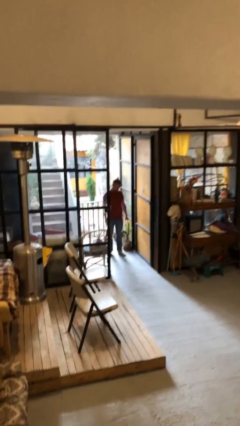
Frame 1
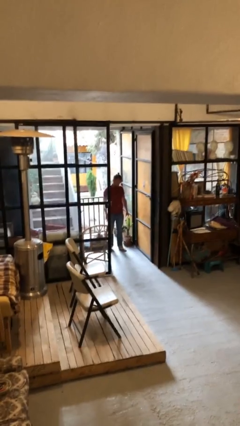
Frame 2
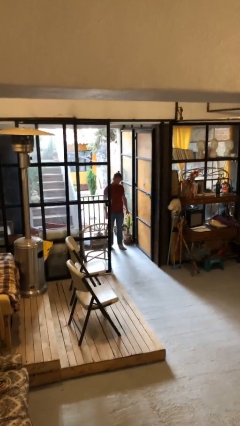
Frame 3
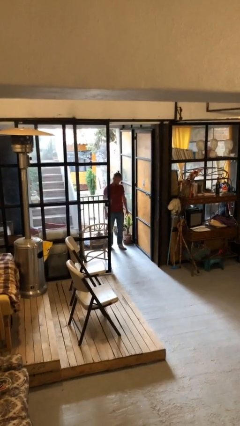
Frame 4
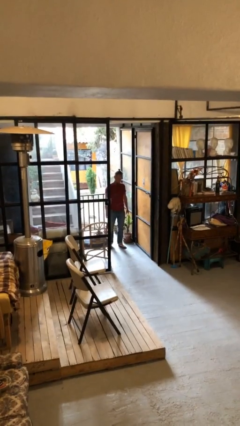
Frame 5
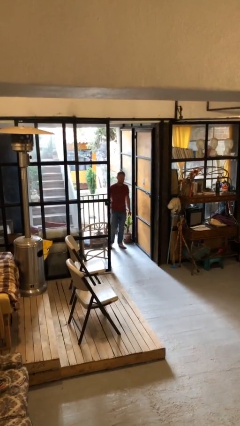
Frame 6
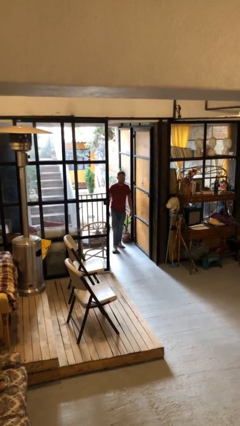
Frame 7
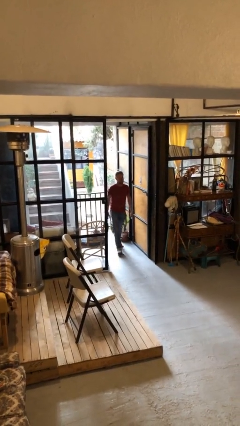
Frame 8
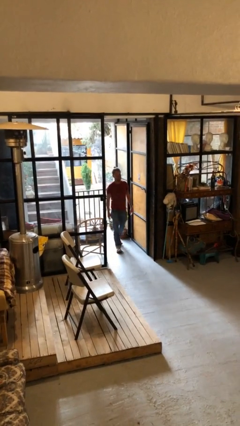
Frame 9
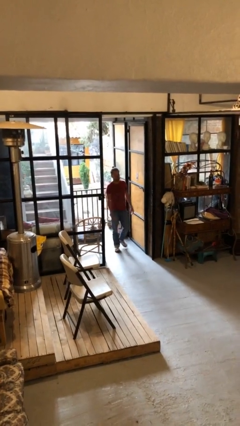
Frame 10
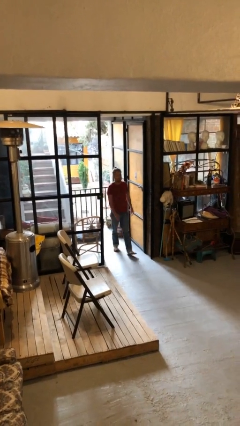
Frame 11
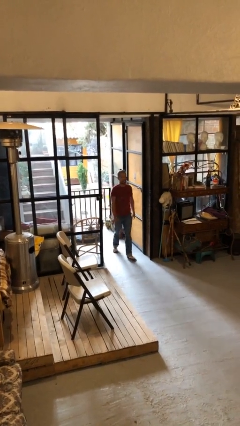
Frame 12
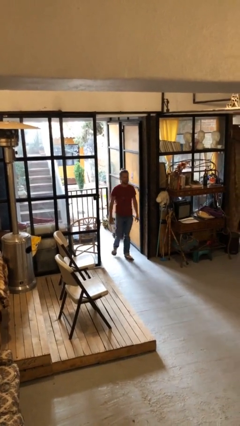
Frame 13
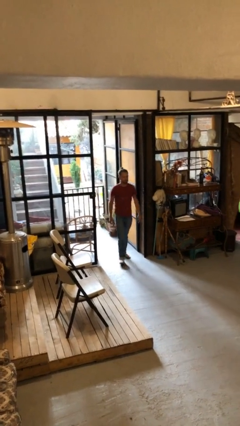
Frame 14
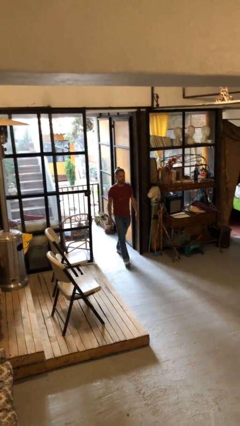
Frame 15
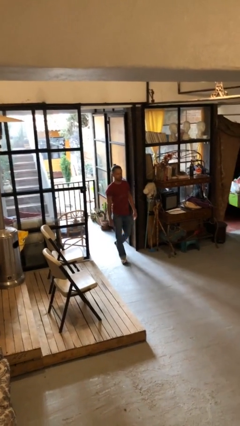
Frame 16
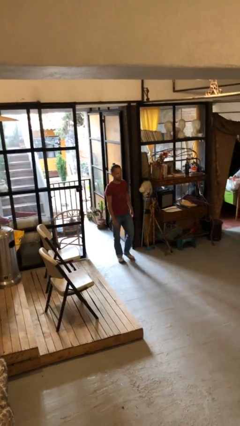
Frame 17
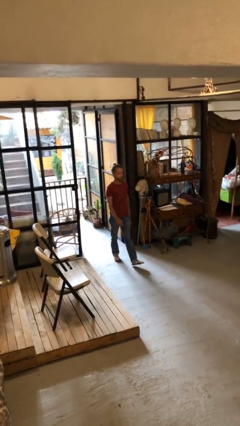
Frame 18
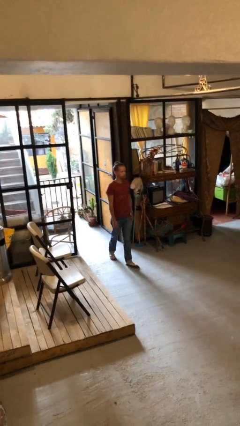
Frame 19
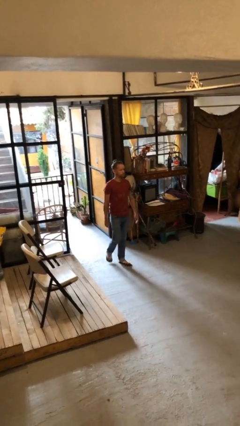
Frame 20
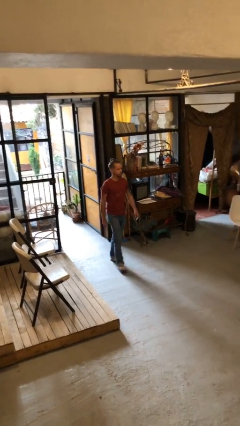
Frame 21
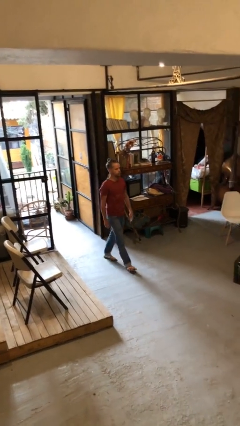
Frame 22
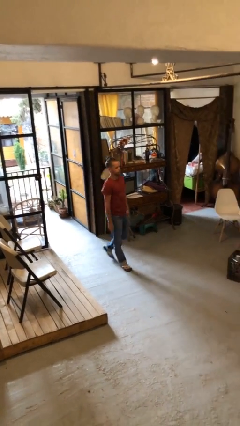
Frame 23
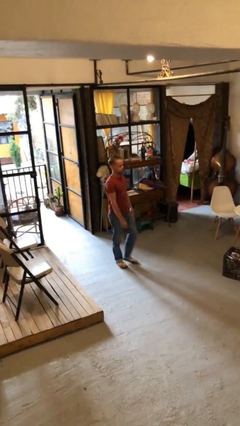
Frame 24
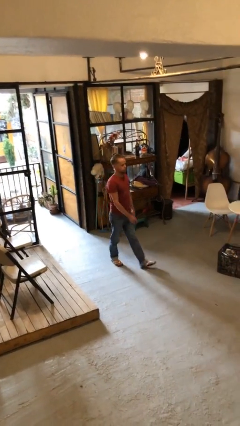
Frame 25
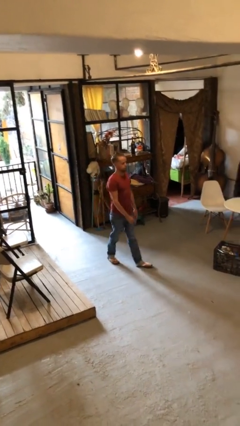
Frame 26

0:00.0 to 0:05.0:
person enters scene through structure

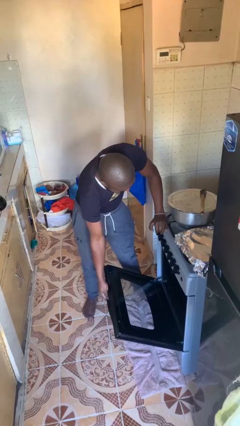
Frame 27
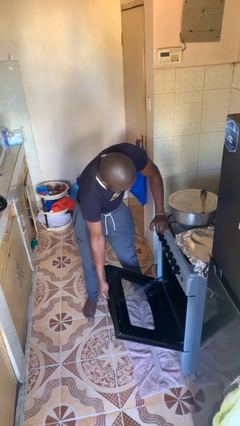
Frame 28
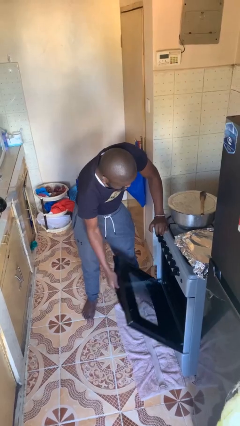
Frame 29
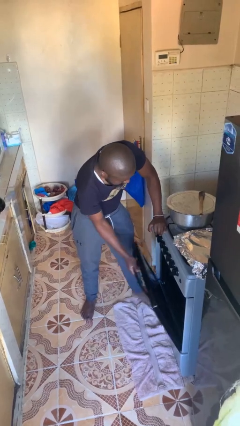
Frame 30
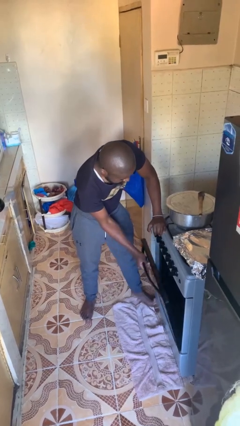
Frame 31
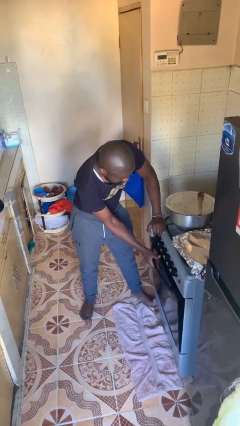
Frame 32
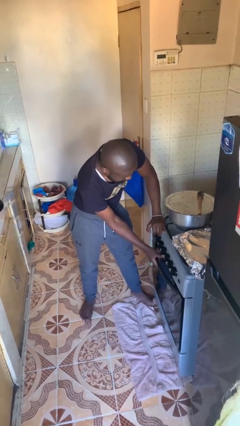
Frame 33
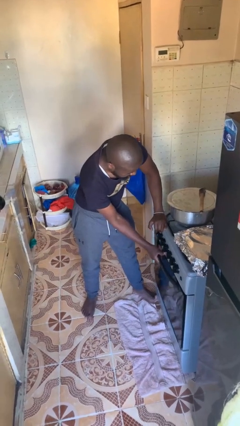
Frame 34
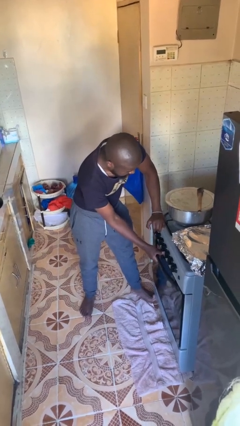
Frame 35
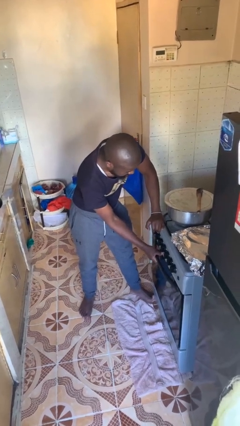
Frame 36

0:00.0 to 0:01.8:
person closes oven door

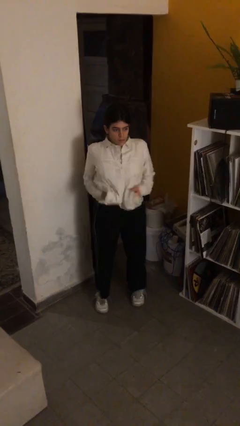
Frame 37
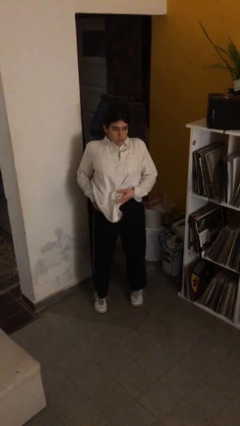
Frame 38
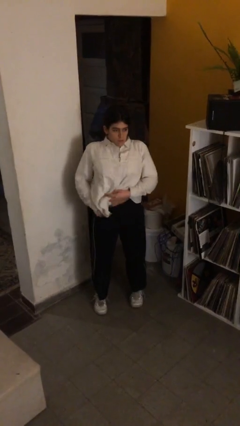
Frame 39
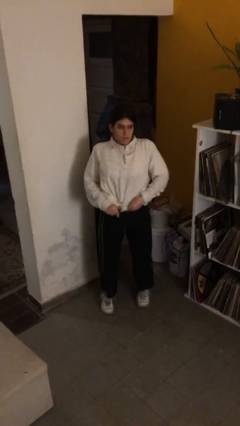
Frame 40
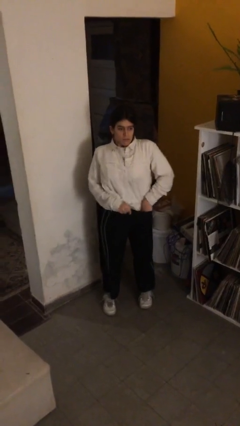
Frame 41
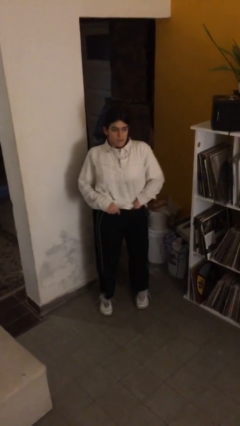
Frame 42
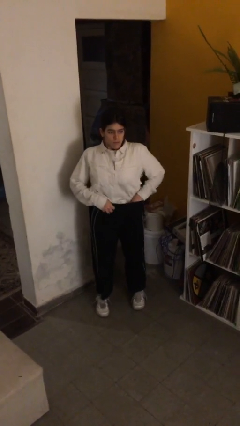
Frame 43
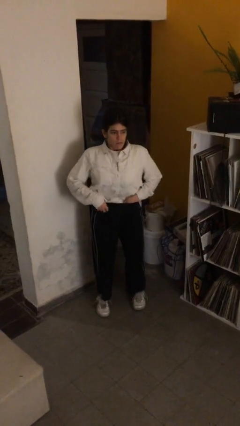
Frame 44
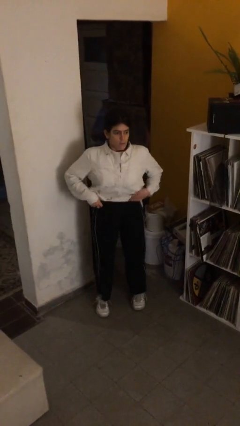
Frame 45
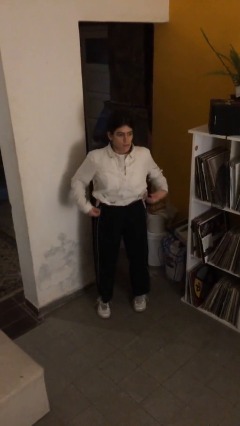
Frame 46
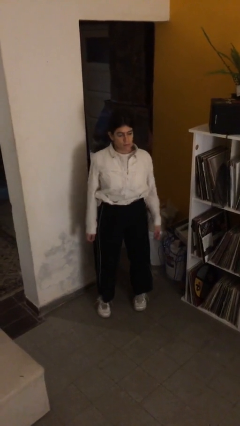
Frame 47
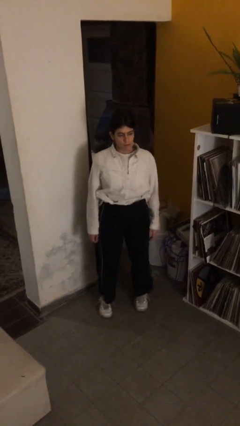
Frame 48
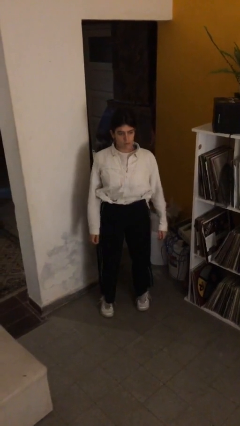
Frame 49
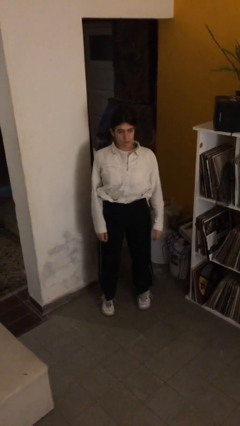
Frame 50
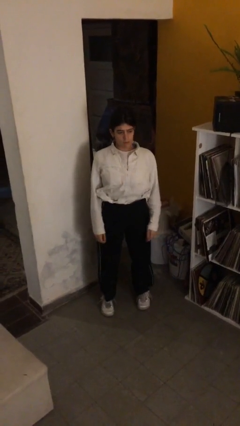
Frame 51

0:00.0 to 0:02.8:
person tucks in shirt

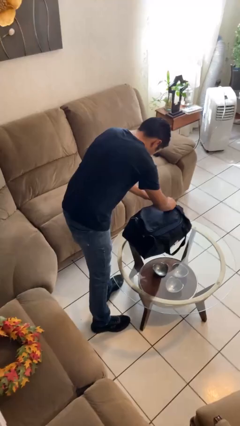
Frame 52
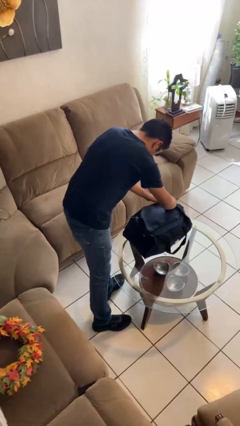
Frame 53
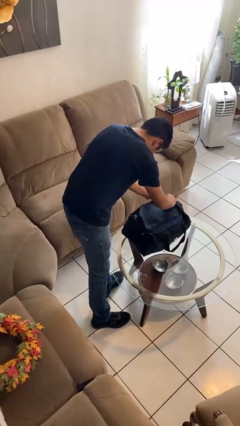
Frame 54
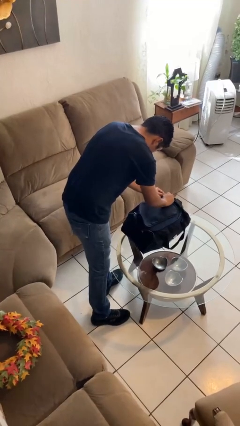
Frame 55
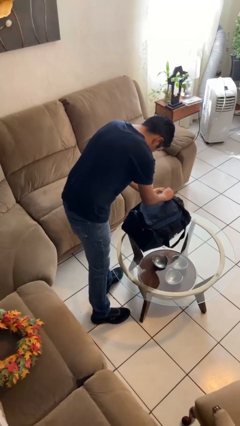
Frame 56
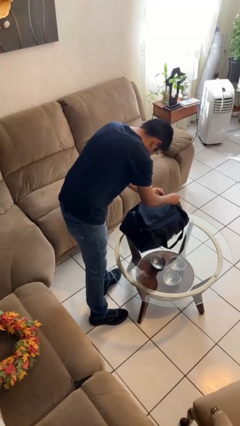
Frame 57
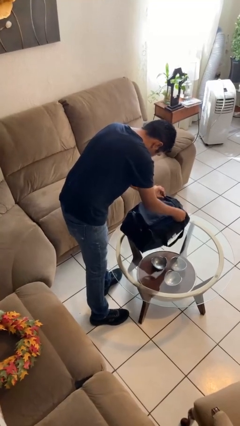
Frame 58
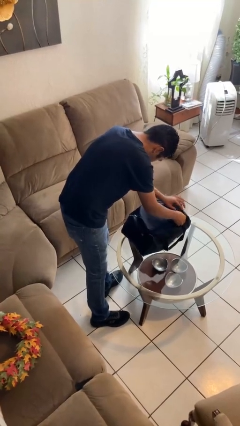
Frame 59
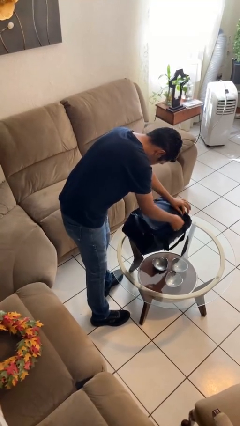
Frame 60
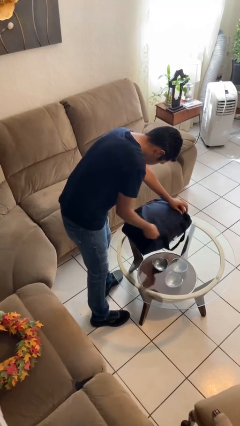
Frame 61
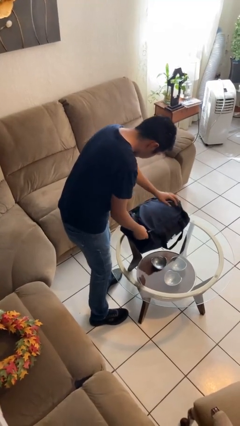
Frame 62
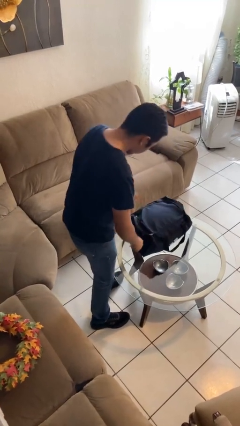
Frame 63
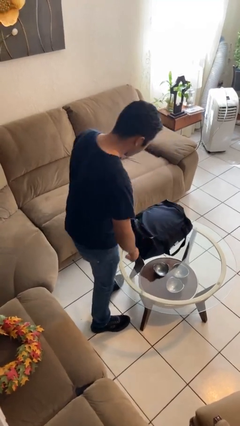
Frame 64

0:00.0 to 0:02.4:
person closes suitcase

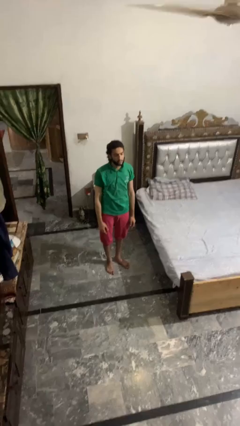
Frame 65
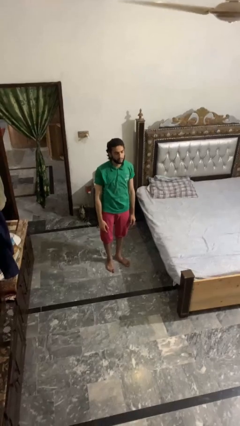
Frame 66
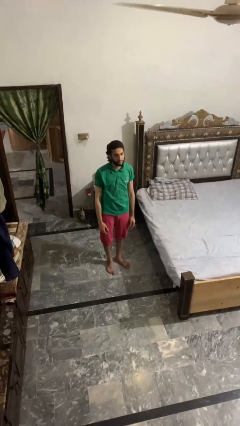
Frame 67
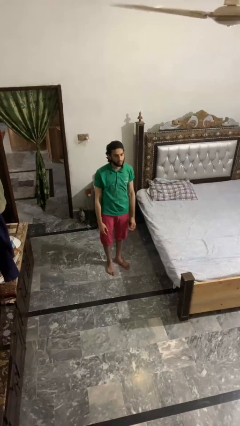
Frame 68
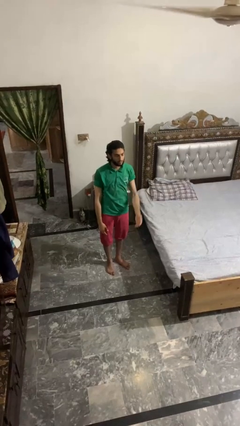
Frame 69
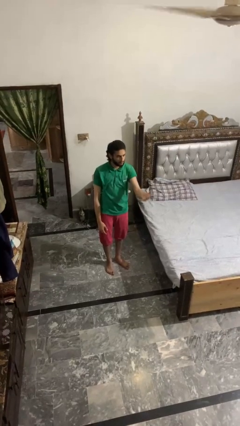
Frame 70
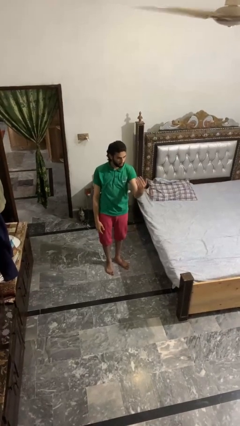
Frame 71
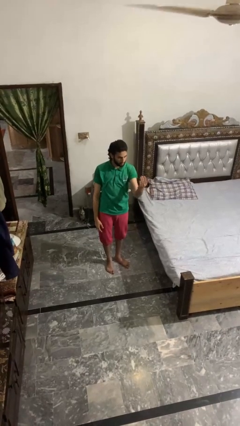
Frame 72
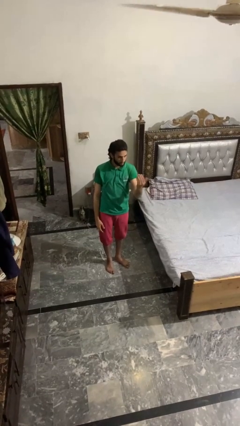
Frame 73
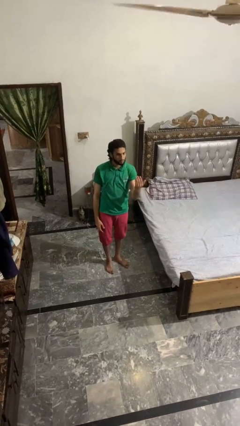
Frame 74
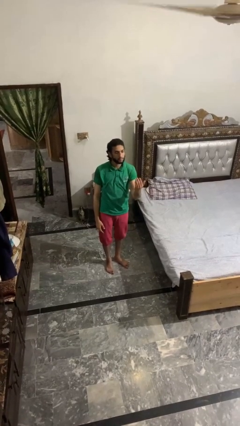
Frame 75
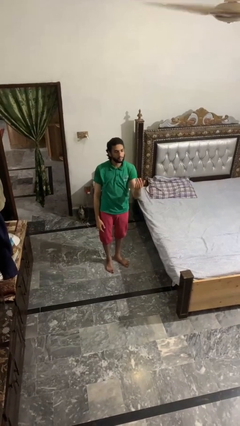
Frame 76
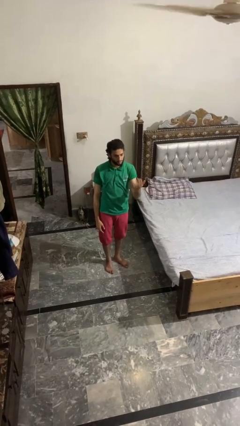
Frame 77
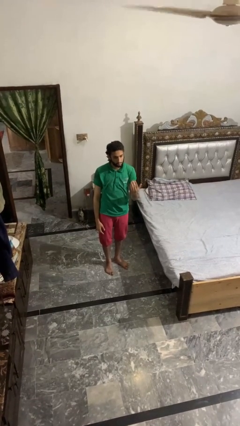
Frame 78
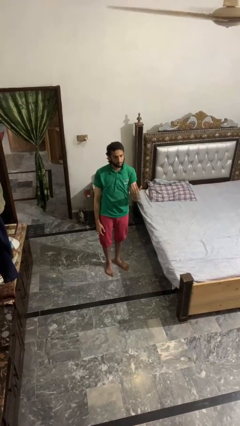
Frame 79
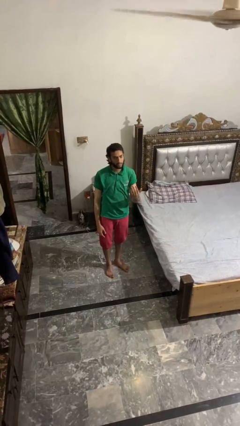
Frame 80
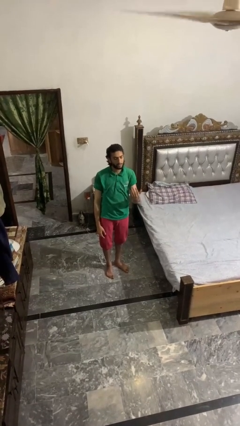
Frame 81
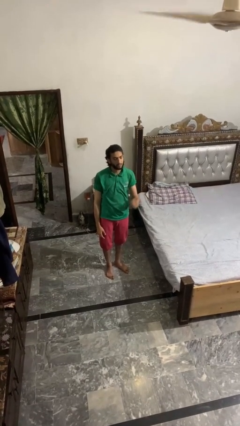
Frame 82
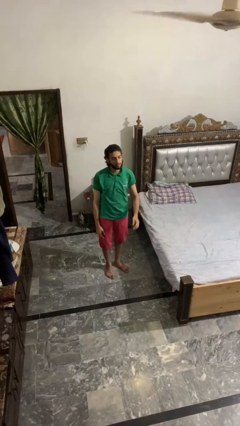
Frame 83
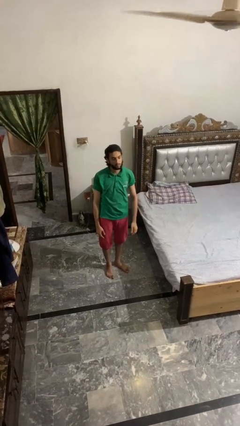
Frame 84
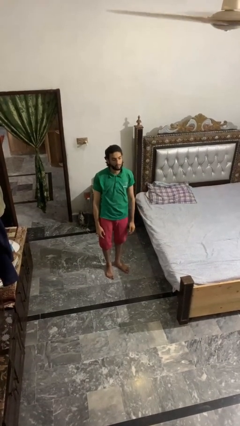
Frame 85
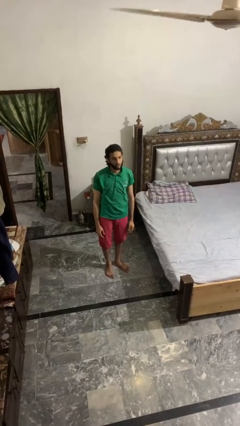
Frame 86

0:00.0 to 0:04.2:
person gestures come here

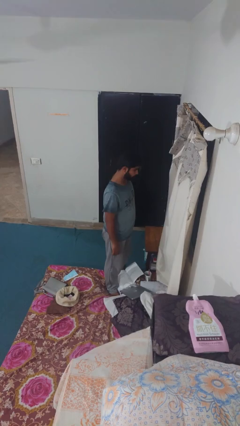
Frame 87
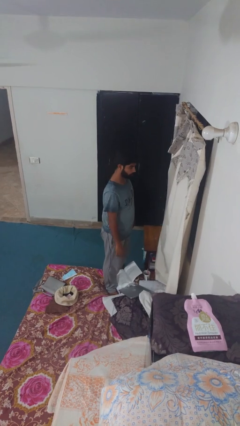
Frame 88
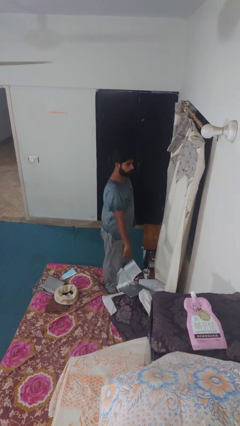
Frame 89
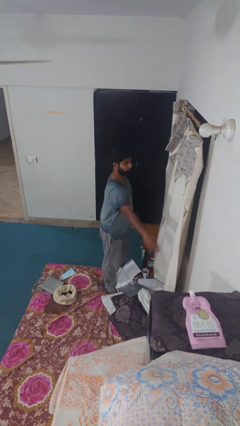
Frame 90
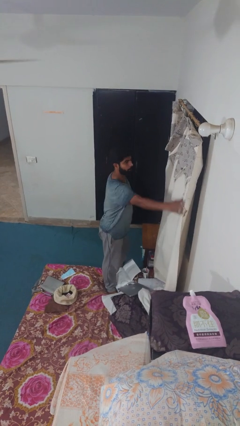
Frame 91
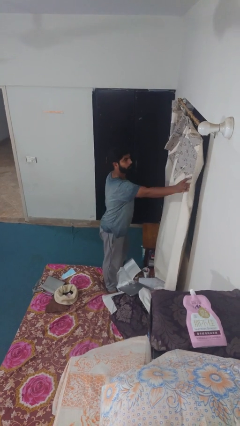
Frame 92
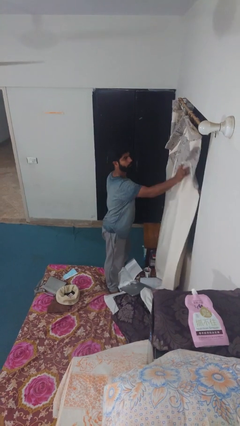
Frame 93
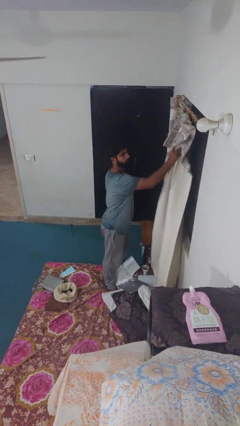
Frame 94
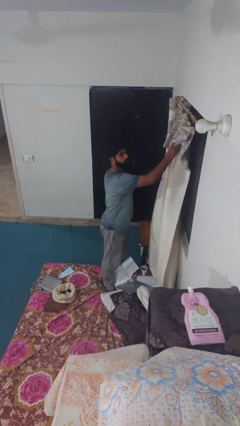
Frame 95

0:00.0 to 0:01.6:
person opens curtains
